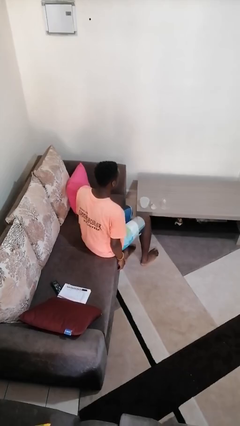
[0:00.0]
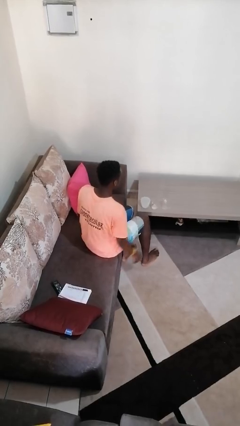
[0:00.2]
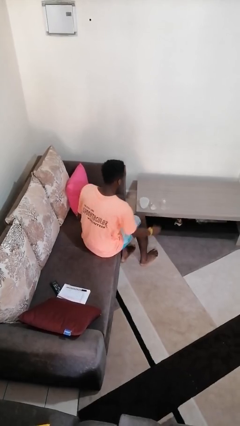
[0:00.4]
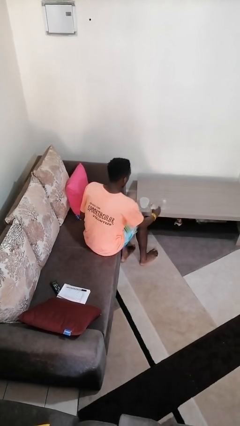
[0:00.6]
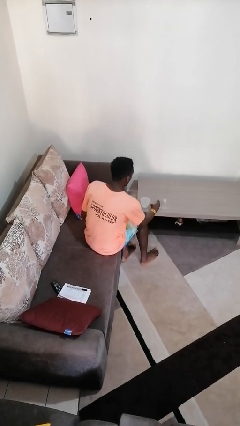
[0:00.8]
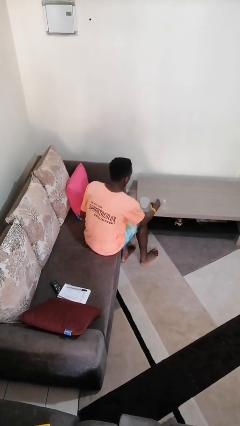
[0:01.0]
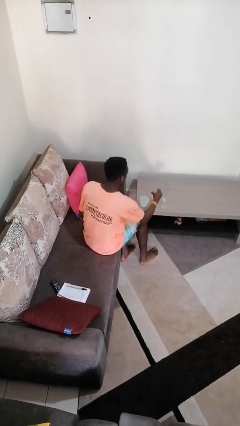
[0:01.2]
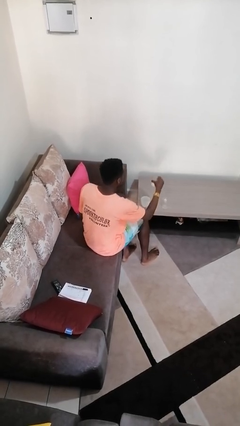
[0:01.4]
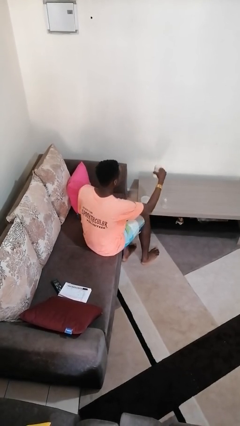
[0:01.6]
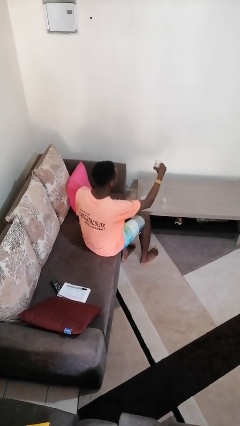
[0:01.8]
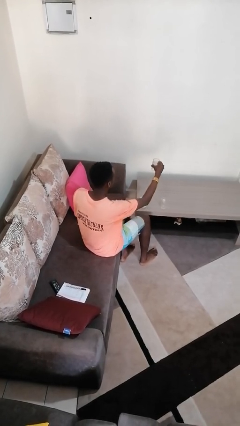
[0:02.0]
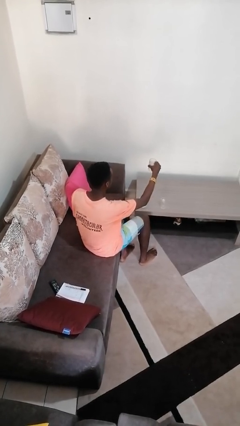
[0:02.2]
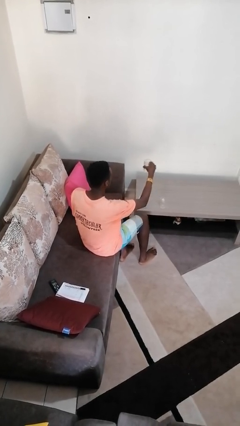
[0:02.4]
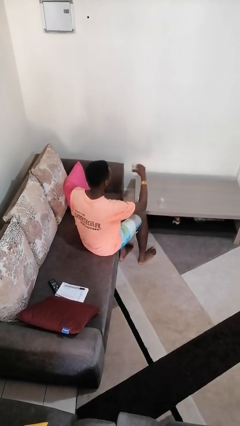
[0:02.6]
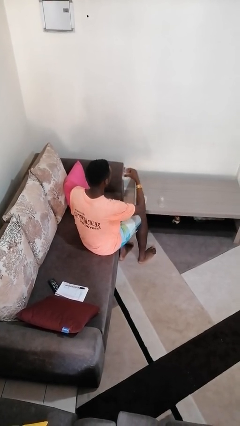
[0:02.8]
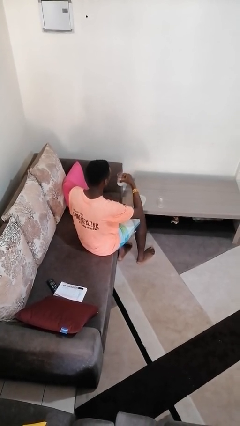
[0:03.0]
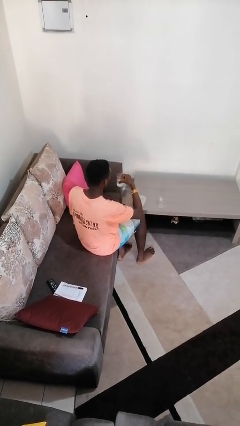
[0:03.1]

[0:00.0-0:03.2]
person picks up object from table

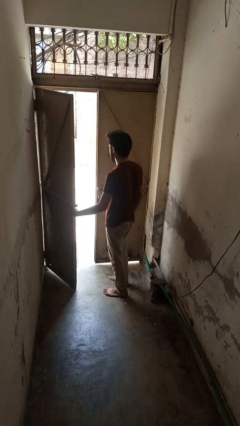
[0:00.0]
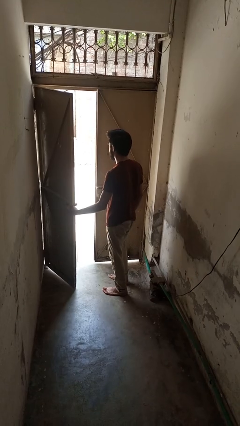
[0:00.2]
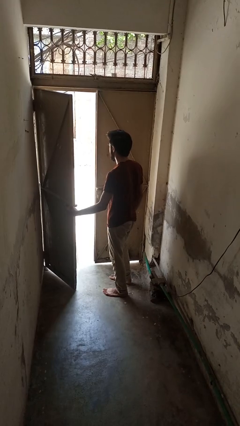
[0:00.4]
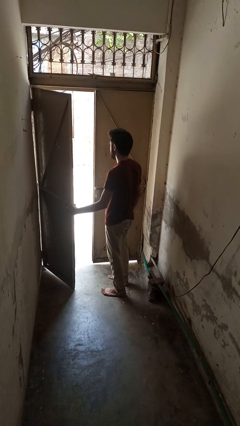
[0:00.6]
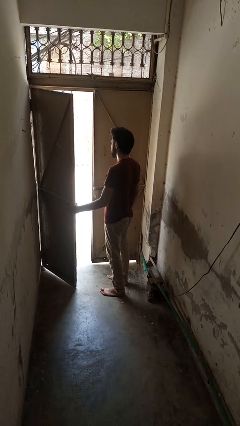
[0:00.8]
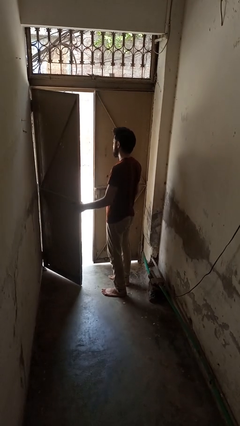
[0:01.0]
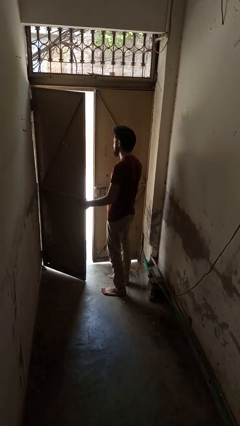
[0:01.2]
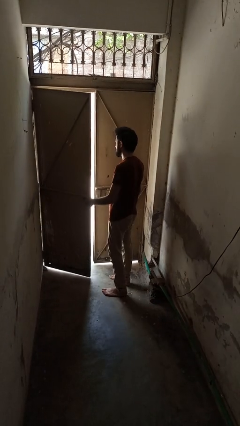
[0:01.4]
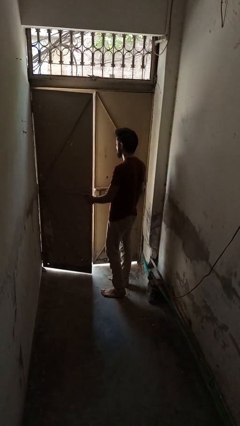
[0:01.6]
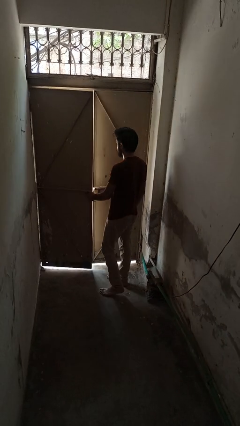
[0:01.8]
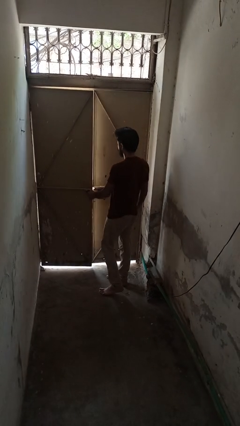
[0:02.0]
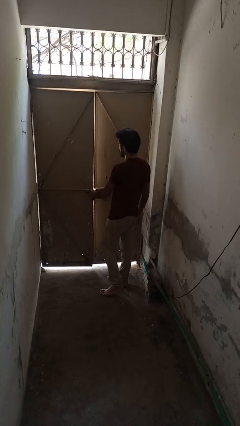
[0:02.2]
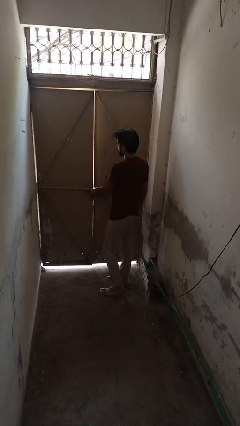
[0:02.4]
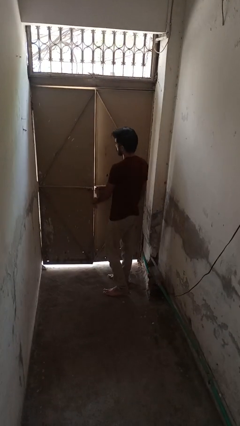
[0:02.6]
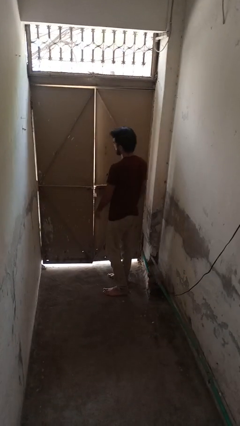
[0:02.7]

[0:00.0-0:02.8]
person closes gate

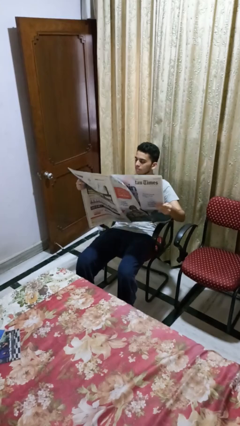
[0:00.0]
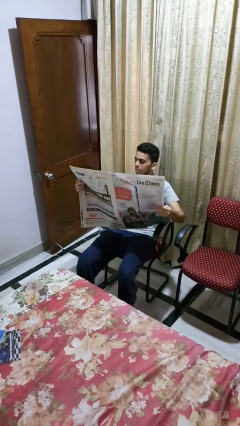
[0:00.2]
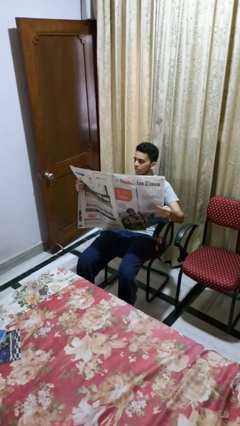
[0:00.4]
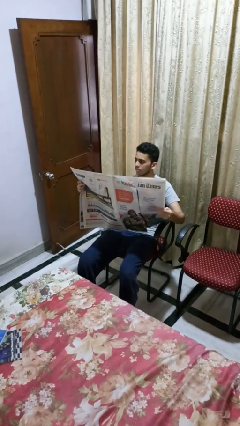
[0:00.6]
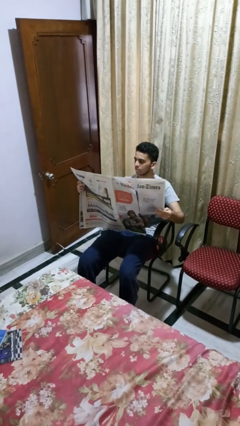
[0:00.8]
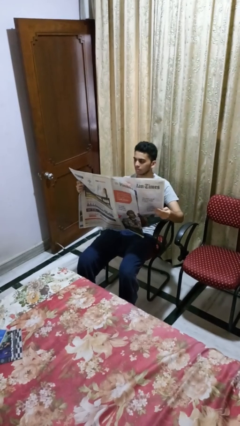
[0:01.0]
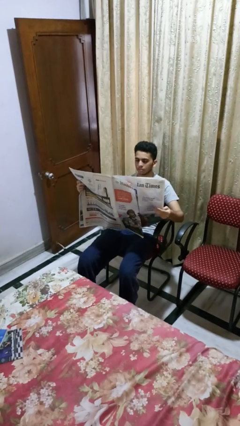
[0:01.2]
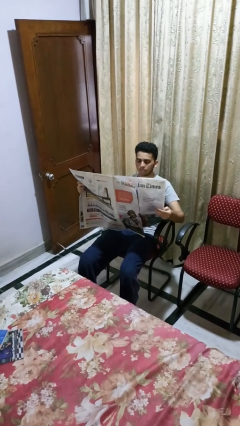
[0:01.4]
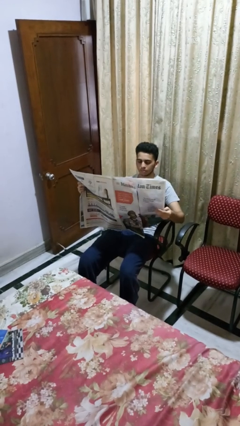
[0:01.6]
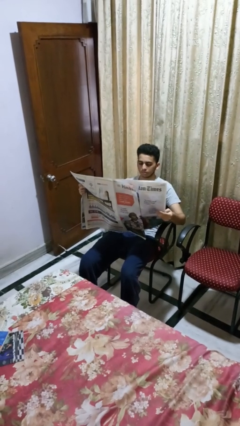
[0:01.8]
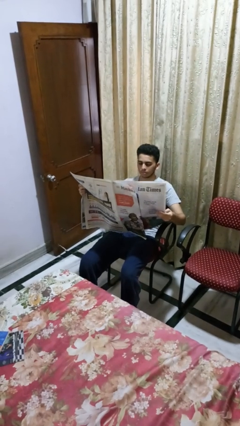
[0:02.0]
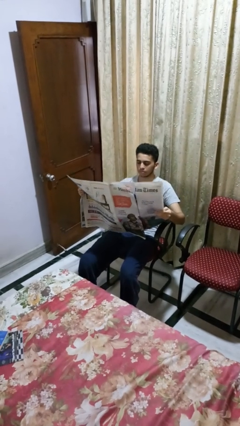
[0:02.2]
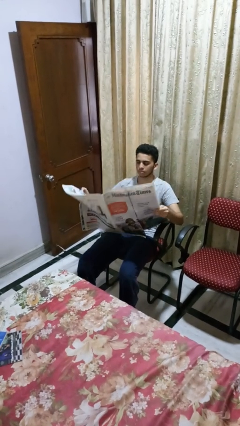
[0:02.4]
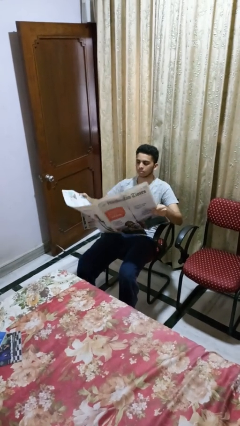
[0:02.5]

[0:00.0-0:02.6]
person reads newspaper

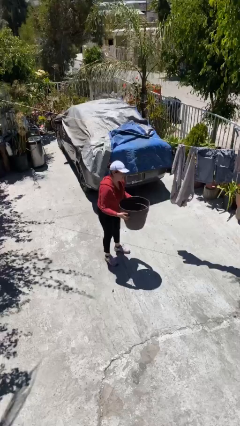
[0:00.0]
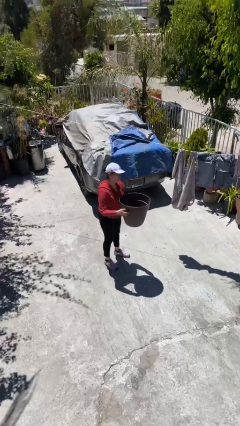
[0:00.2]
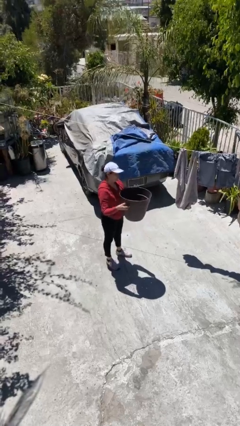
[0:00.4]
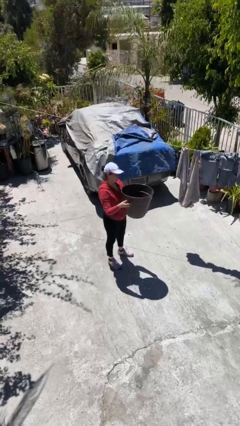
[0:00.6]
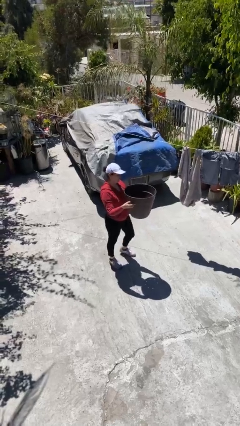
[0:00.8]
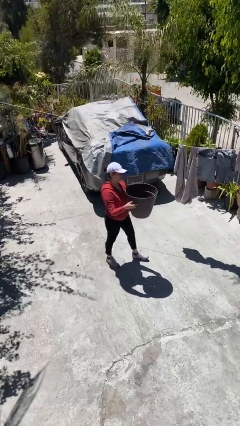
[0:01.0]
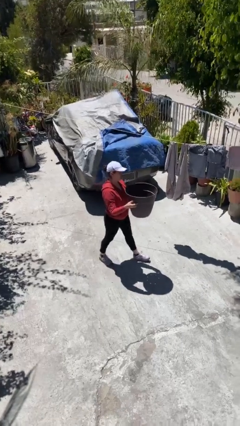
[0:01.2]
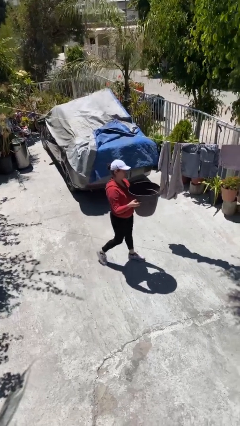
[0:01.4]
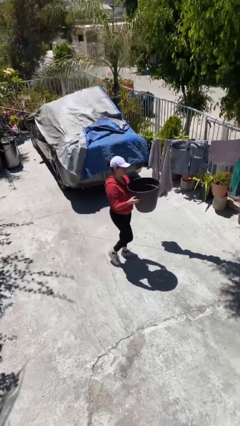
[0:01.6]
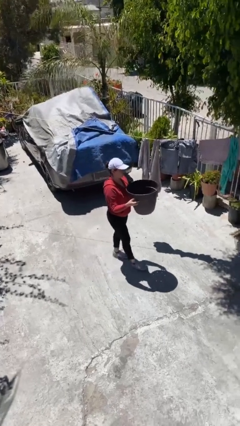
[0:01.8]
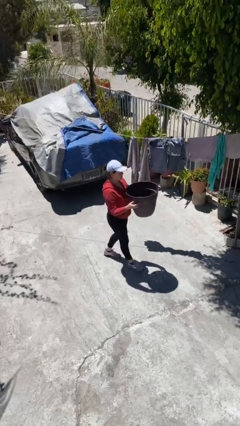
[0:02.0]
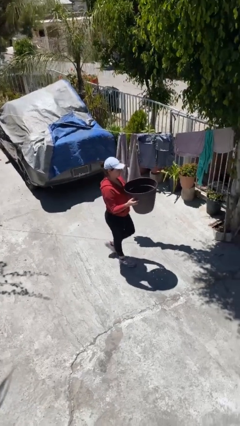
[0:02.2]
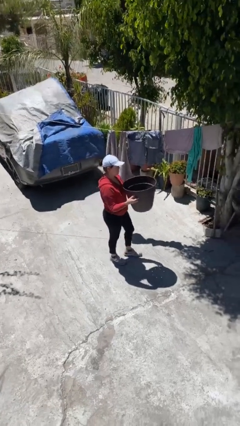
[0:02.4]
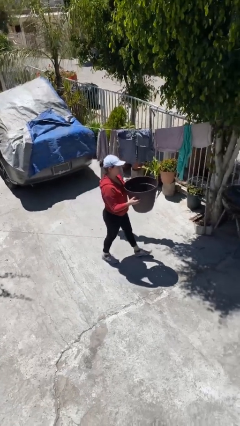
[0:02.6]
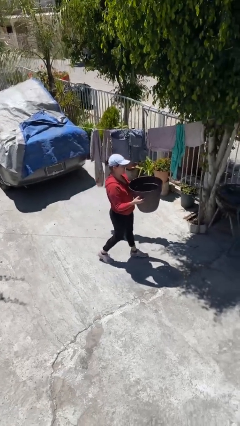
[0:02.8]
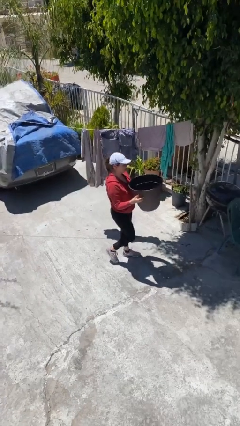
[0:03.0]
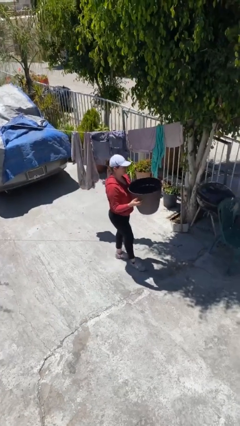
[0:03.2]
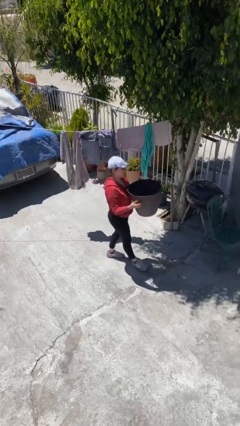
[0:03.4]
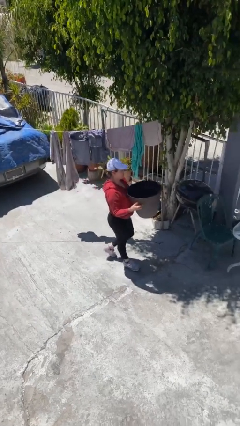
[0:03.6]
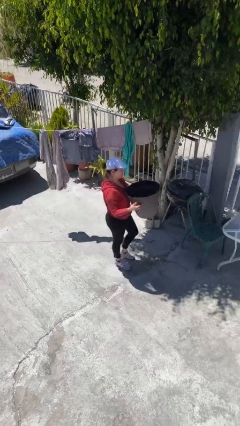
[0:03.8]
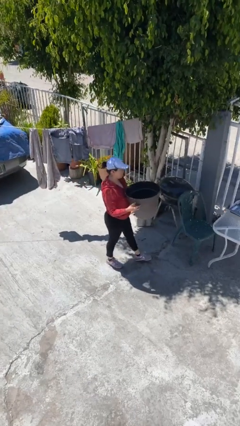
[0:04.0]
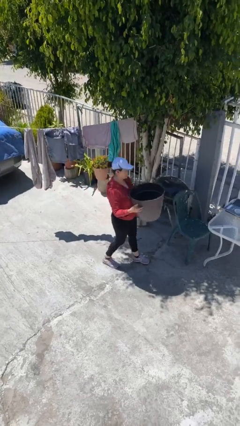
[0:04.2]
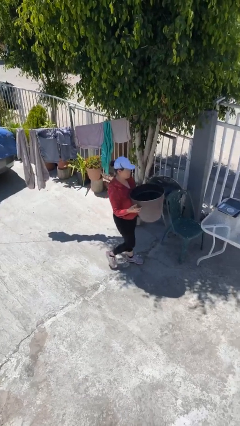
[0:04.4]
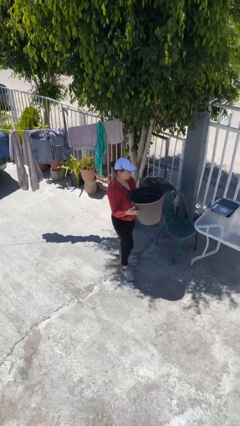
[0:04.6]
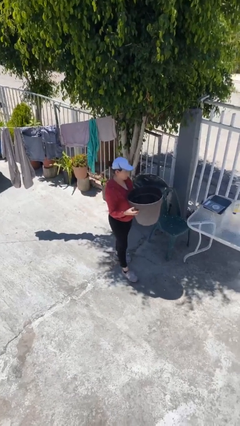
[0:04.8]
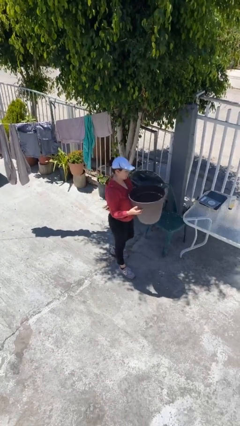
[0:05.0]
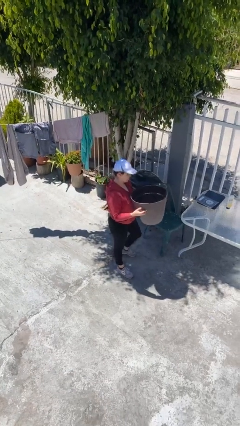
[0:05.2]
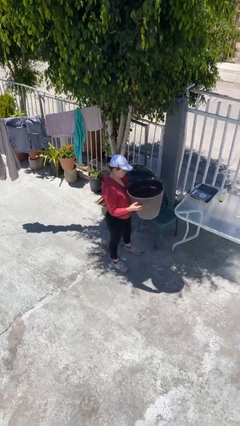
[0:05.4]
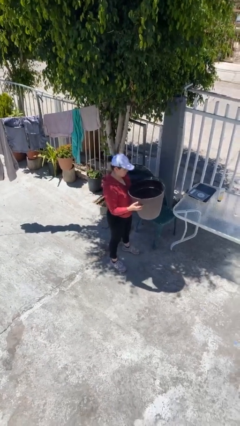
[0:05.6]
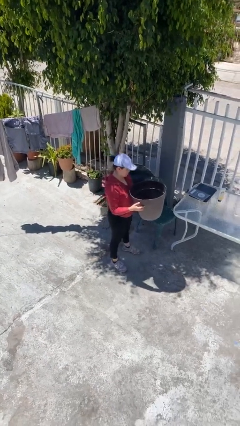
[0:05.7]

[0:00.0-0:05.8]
person carries heavy object

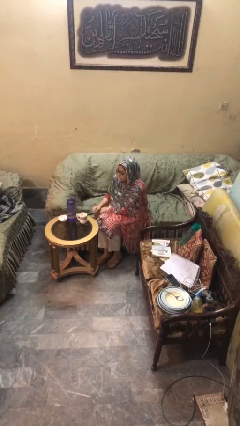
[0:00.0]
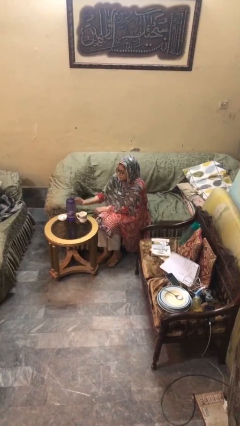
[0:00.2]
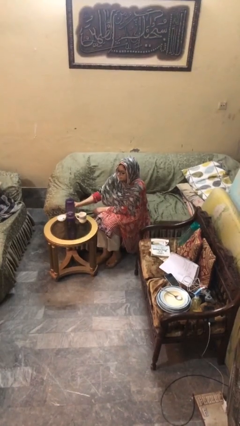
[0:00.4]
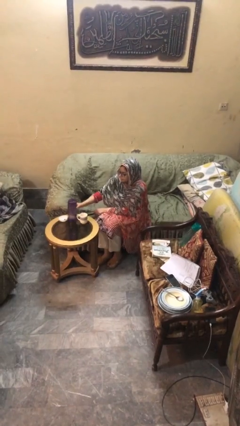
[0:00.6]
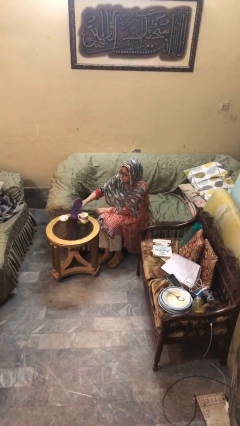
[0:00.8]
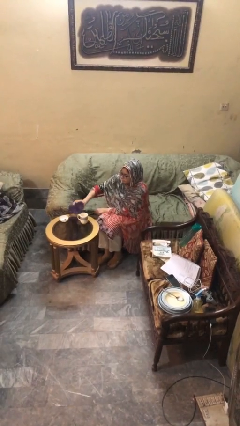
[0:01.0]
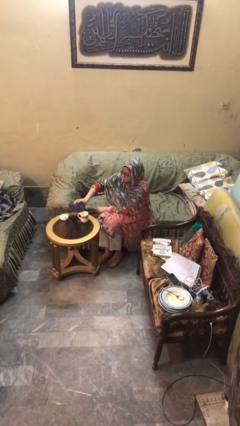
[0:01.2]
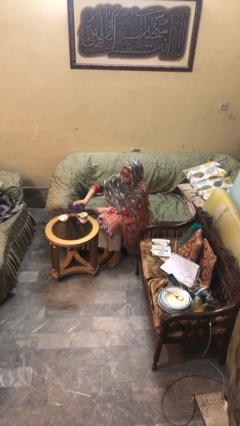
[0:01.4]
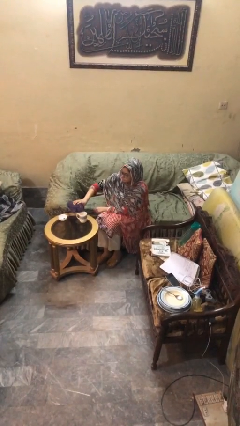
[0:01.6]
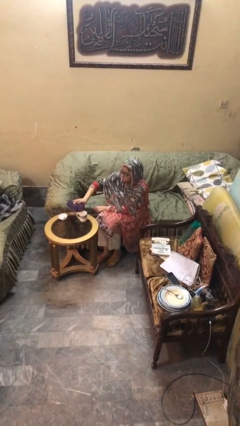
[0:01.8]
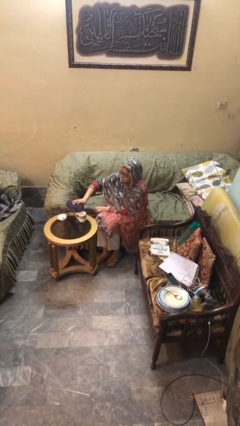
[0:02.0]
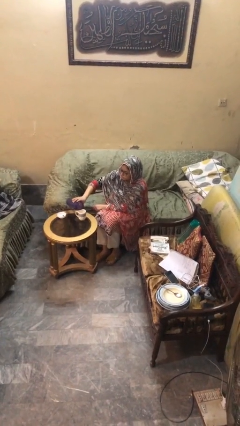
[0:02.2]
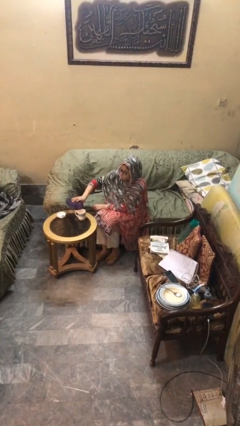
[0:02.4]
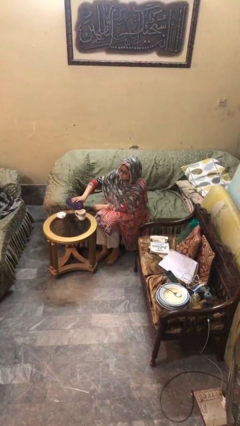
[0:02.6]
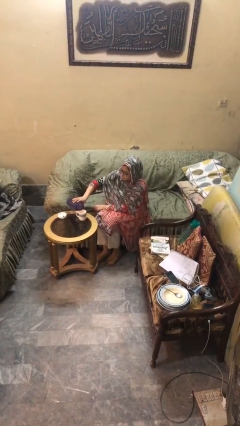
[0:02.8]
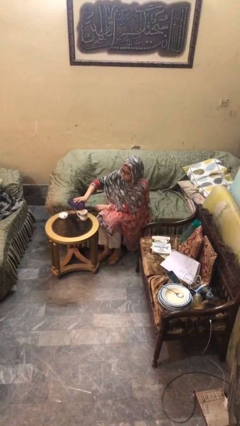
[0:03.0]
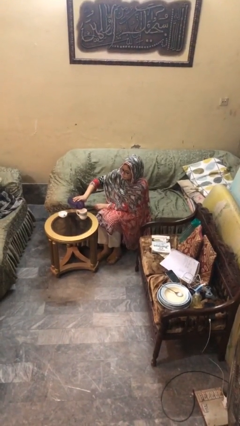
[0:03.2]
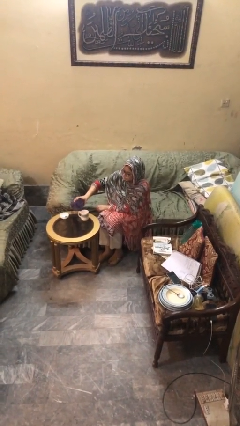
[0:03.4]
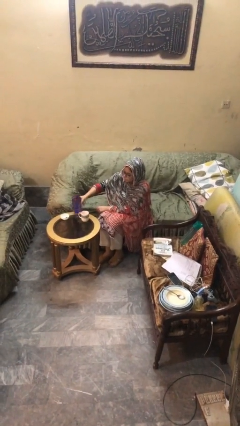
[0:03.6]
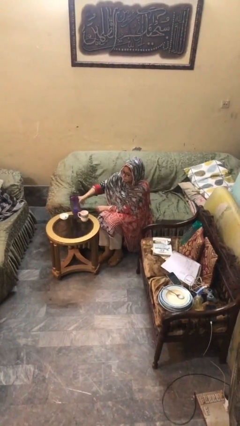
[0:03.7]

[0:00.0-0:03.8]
person pours liquid into cup
